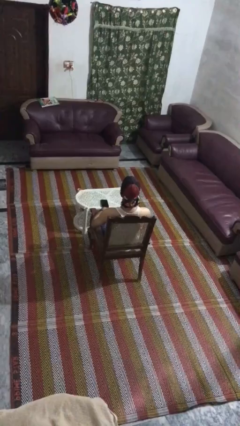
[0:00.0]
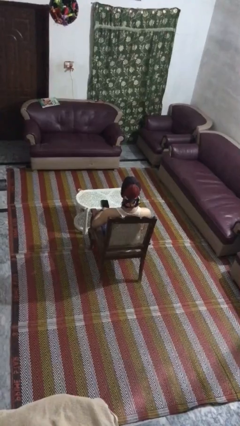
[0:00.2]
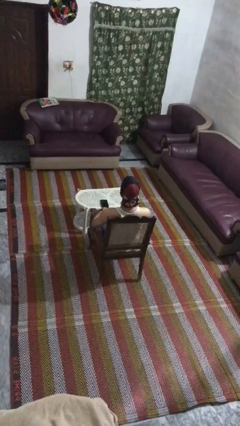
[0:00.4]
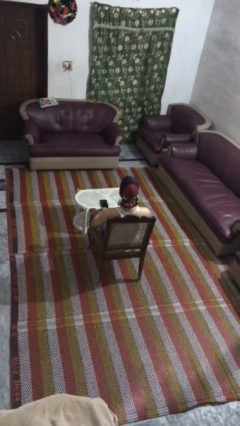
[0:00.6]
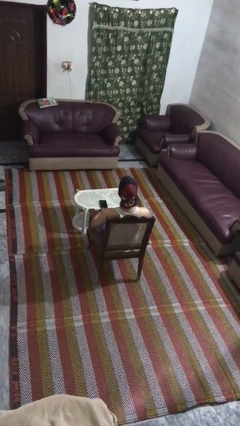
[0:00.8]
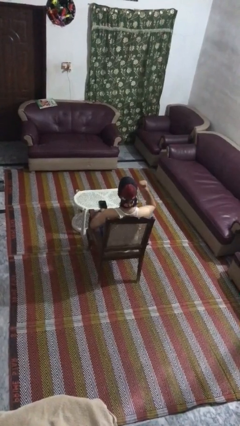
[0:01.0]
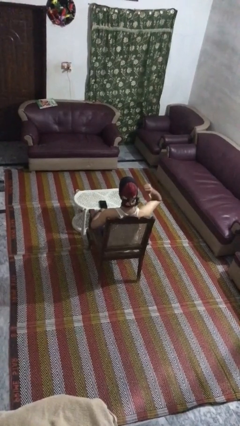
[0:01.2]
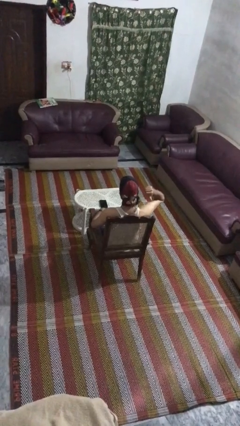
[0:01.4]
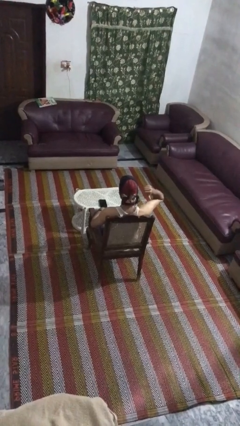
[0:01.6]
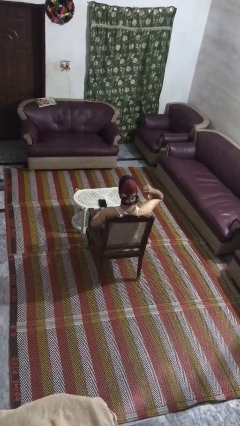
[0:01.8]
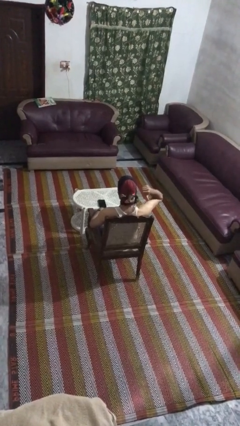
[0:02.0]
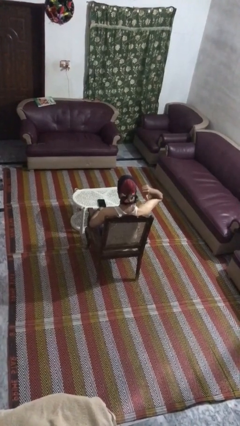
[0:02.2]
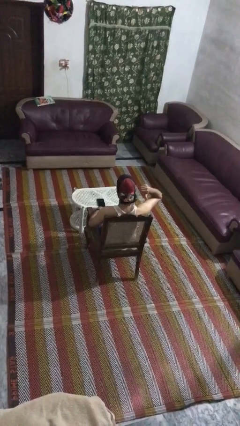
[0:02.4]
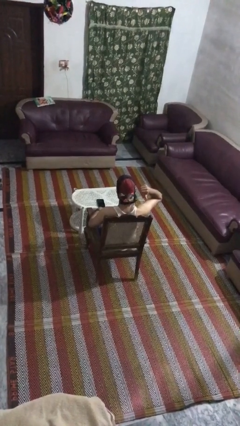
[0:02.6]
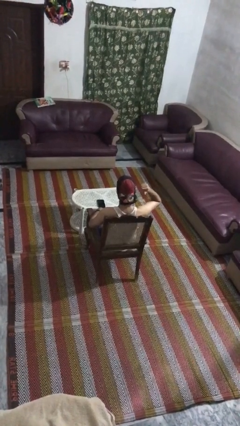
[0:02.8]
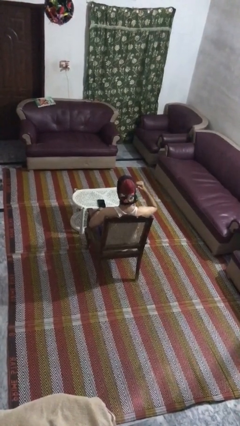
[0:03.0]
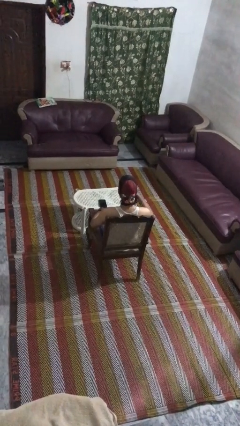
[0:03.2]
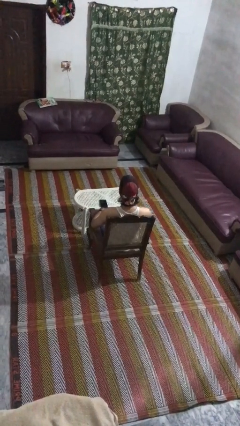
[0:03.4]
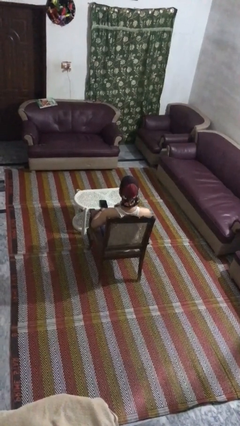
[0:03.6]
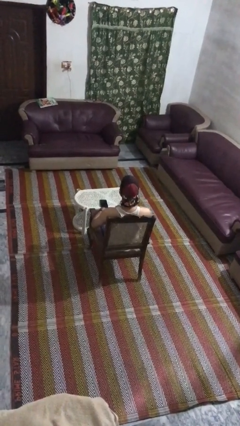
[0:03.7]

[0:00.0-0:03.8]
person gestures behind me

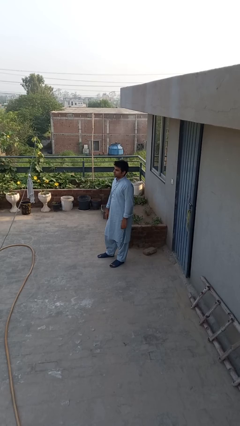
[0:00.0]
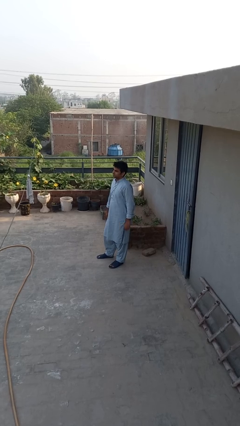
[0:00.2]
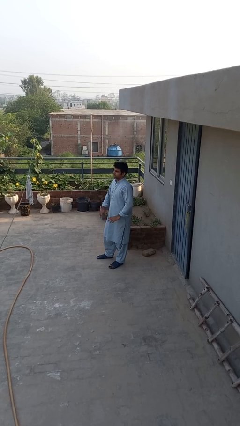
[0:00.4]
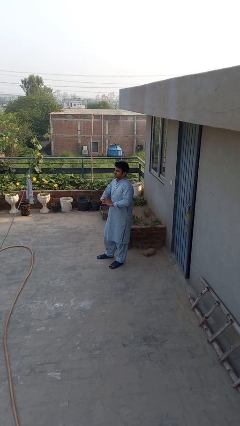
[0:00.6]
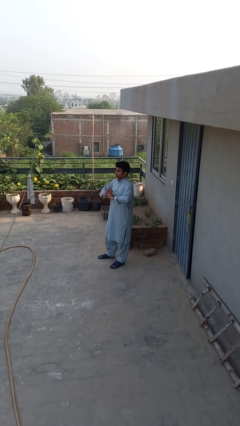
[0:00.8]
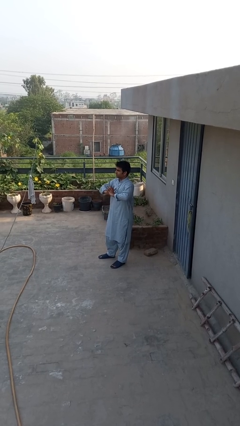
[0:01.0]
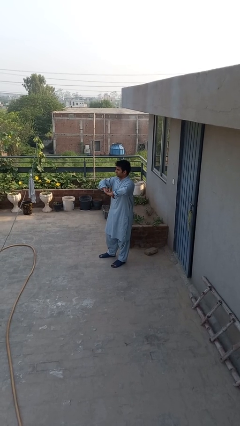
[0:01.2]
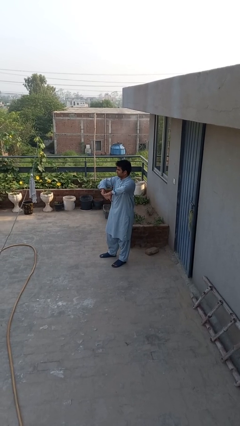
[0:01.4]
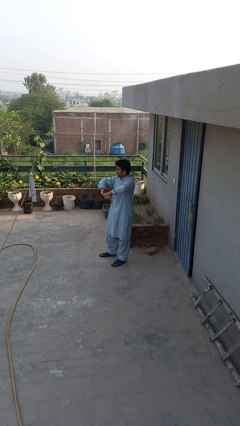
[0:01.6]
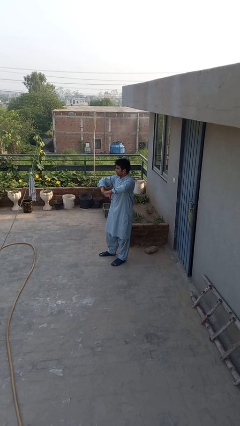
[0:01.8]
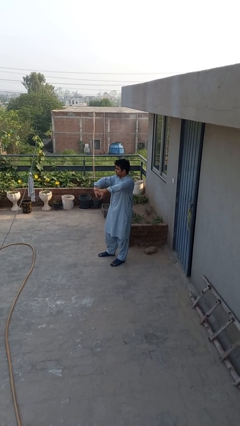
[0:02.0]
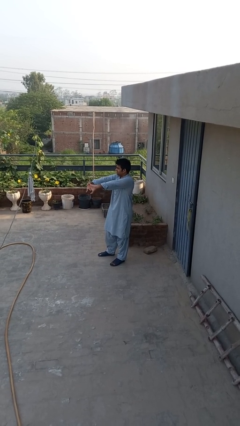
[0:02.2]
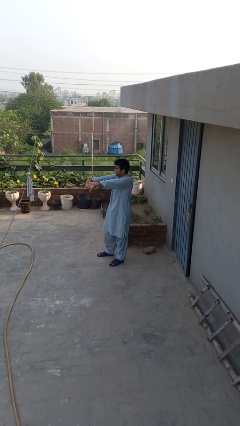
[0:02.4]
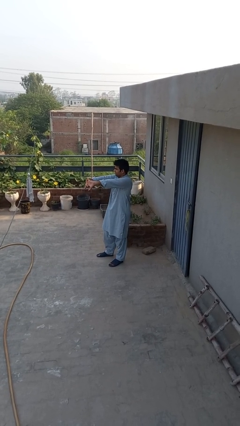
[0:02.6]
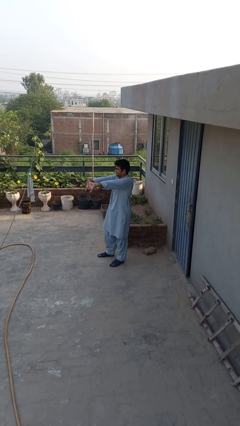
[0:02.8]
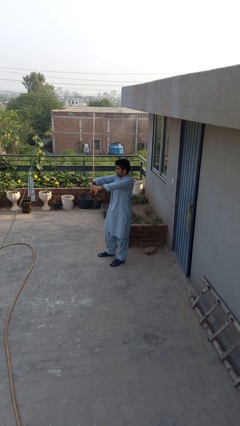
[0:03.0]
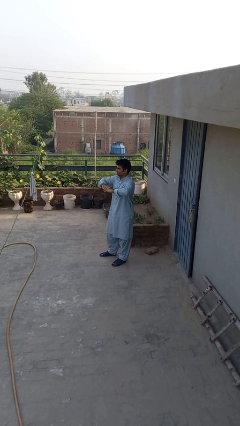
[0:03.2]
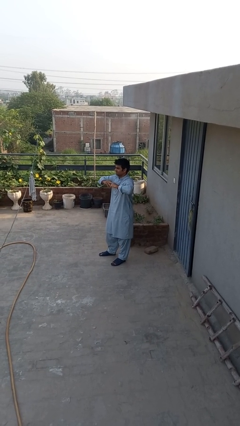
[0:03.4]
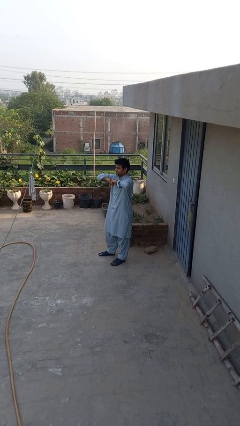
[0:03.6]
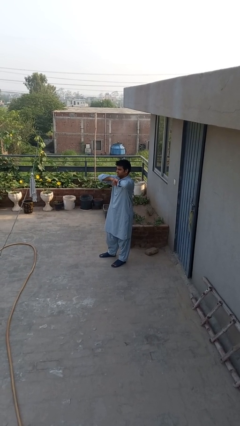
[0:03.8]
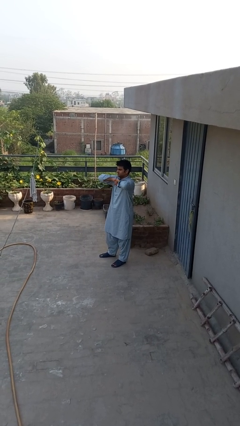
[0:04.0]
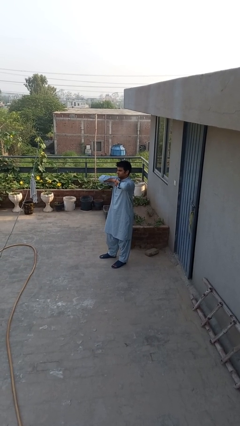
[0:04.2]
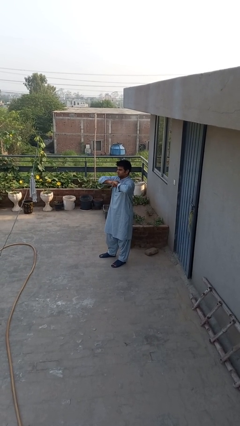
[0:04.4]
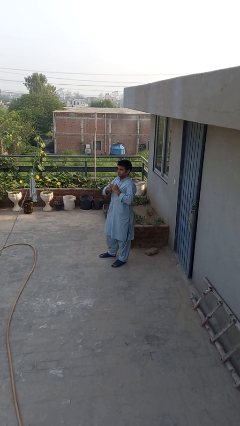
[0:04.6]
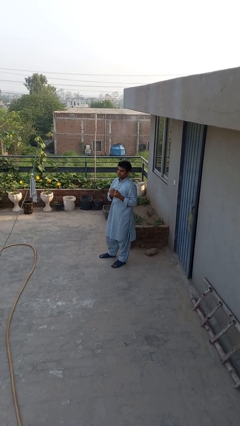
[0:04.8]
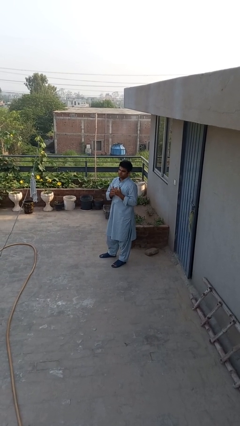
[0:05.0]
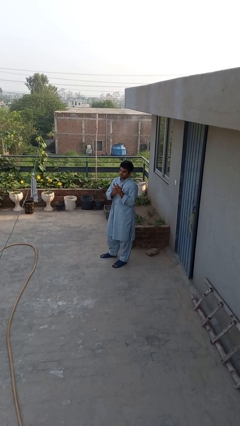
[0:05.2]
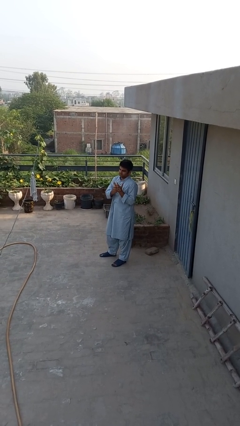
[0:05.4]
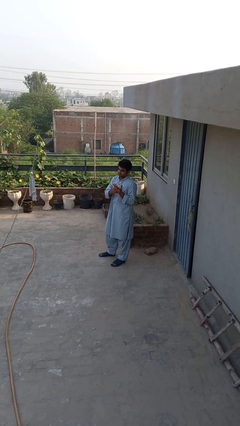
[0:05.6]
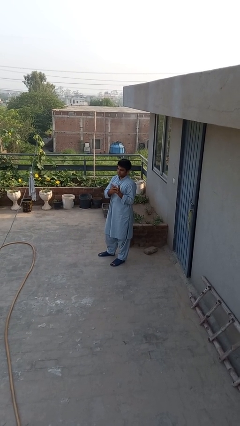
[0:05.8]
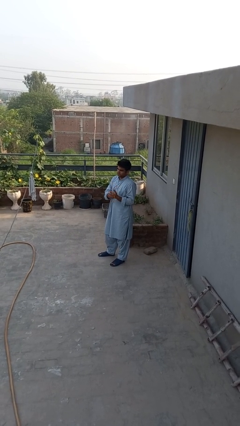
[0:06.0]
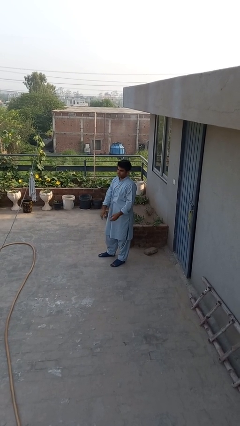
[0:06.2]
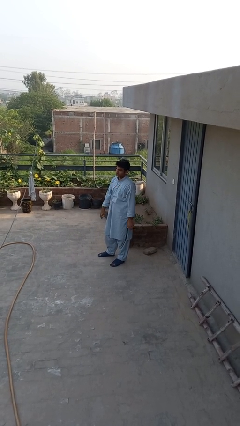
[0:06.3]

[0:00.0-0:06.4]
person cracks knuckles

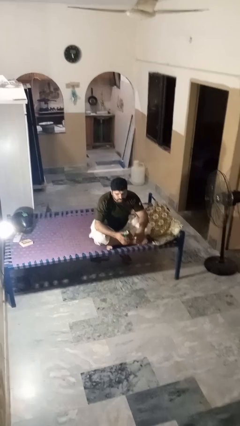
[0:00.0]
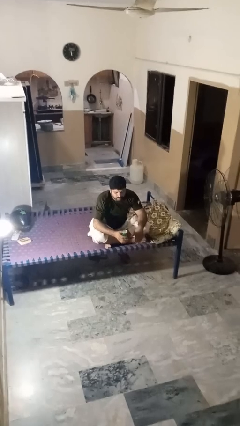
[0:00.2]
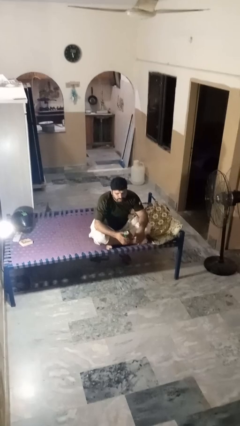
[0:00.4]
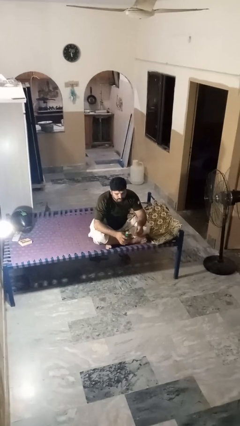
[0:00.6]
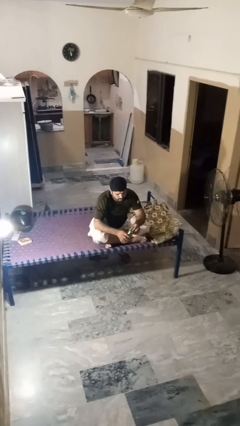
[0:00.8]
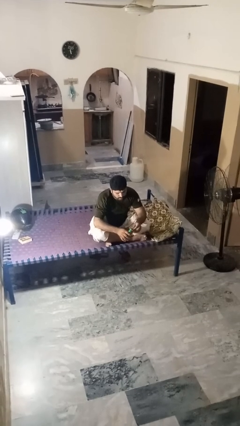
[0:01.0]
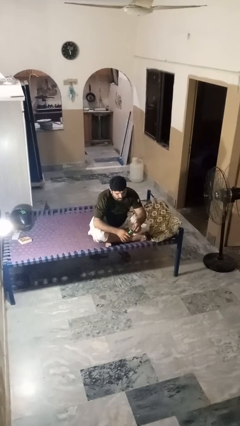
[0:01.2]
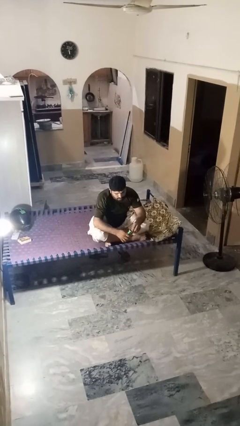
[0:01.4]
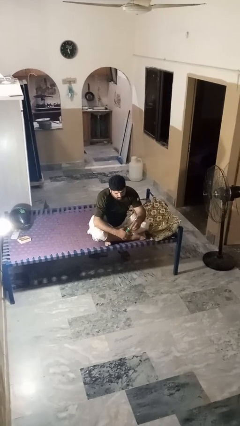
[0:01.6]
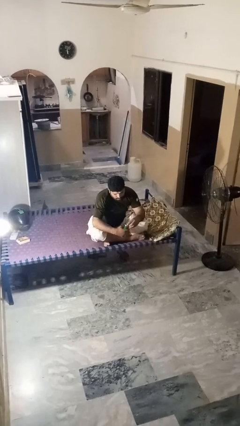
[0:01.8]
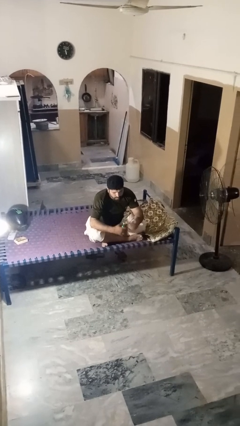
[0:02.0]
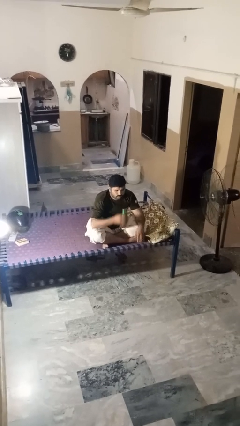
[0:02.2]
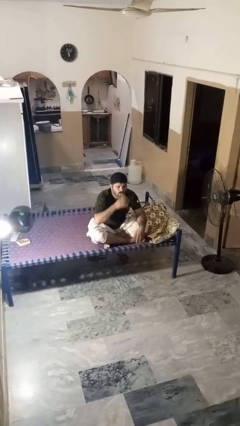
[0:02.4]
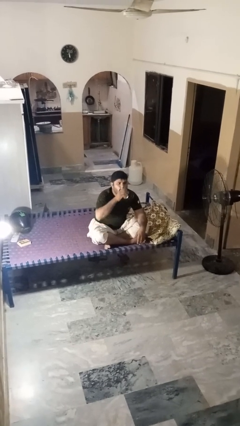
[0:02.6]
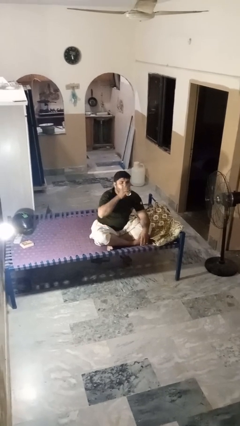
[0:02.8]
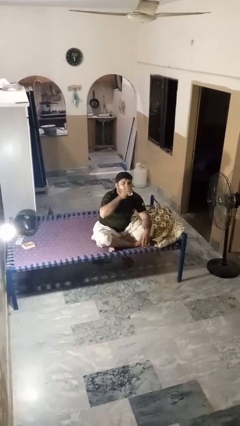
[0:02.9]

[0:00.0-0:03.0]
person opens beverage can

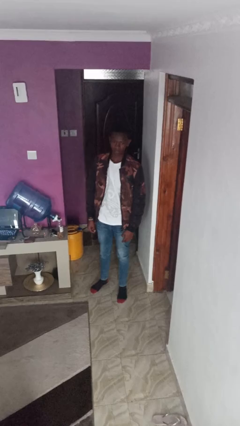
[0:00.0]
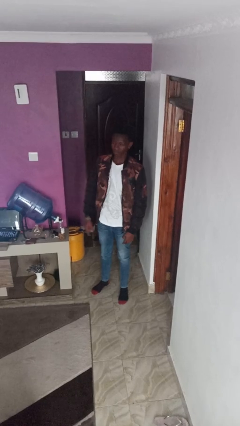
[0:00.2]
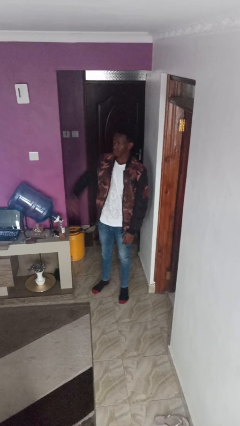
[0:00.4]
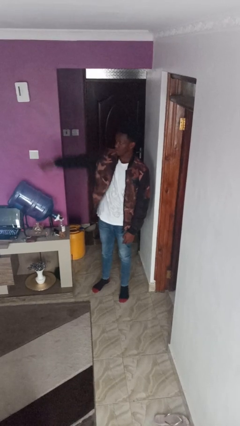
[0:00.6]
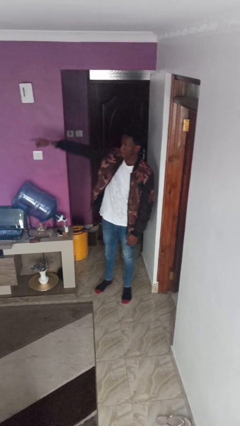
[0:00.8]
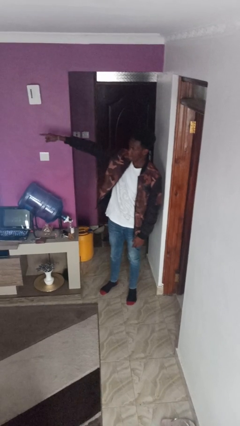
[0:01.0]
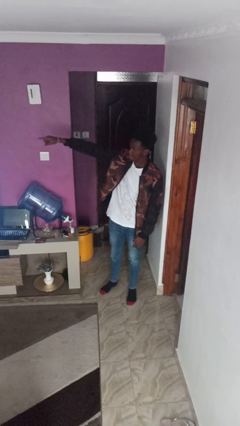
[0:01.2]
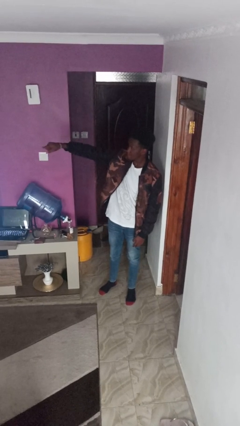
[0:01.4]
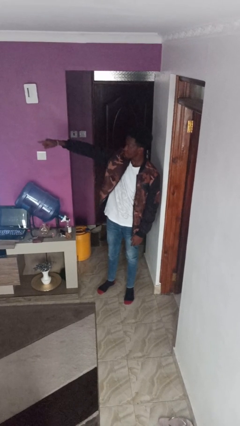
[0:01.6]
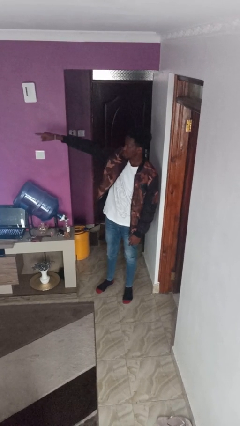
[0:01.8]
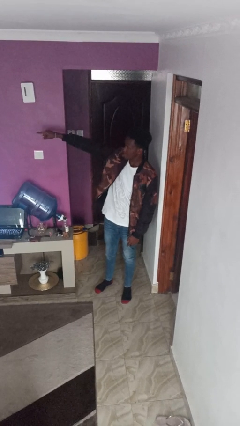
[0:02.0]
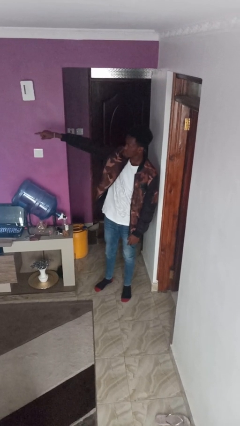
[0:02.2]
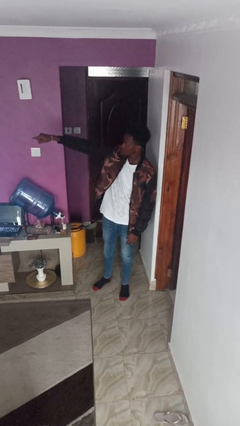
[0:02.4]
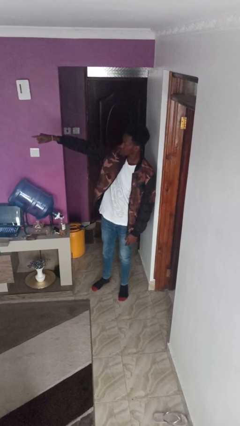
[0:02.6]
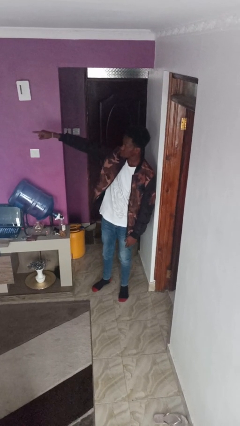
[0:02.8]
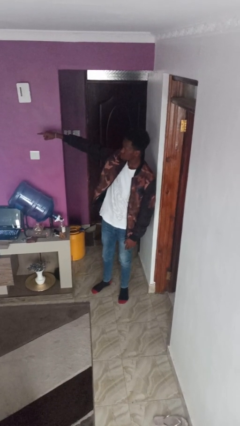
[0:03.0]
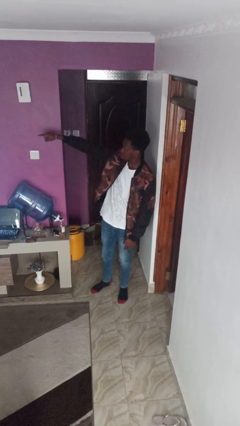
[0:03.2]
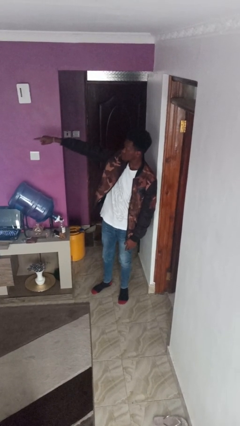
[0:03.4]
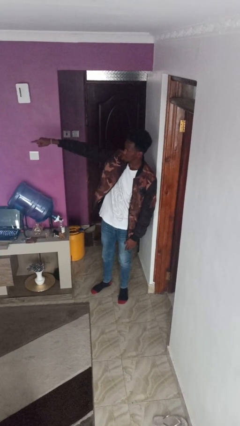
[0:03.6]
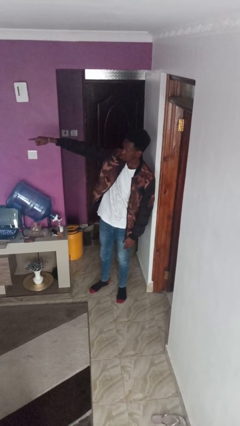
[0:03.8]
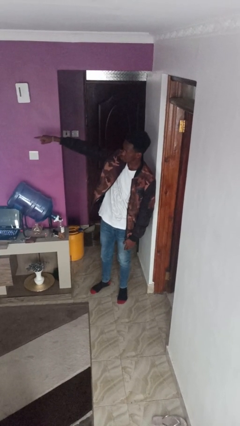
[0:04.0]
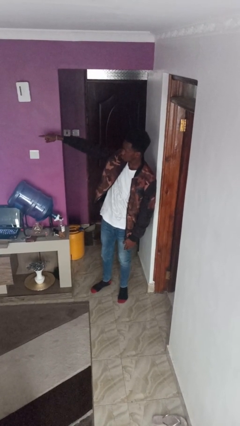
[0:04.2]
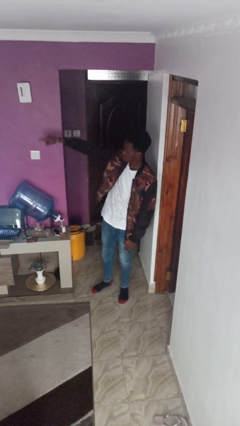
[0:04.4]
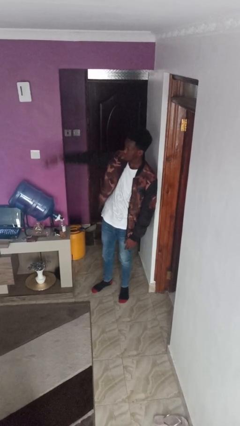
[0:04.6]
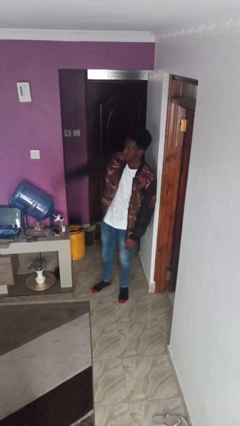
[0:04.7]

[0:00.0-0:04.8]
person points at person
